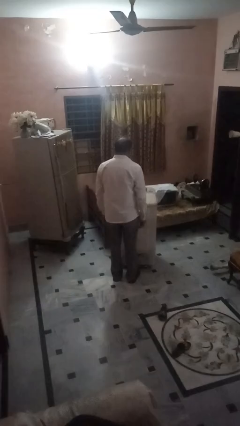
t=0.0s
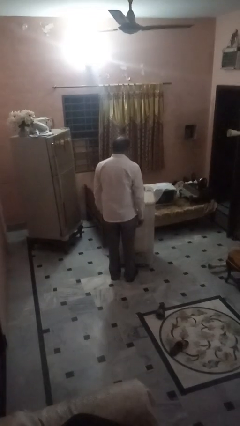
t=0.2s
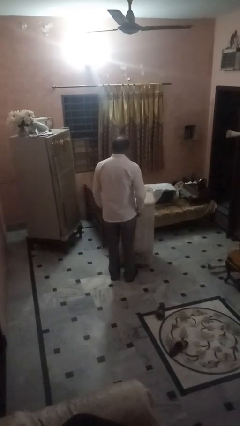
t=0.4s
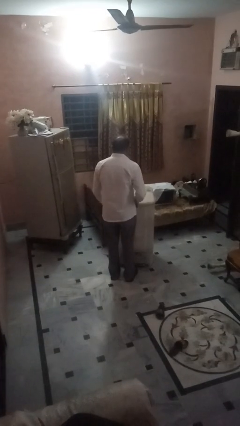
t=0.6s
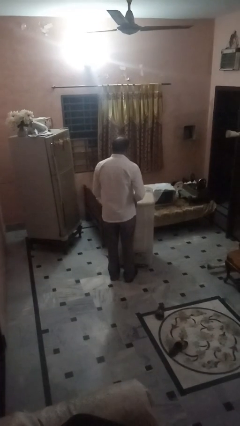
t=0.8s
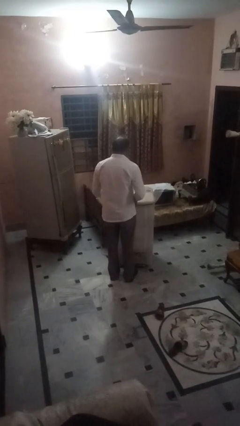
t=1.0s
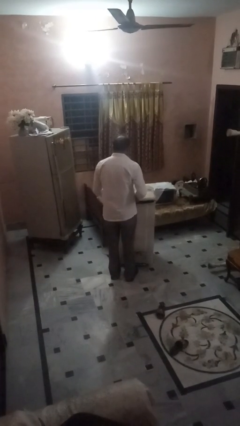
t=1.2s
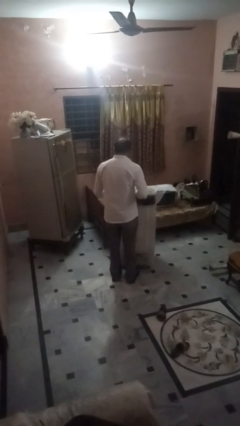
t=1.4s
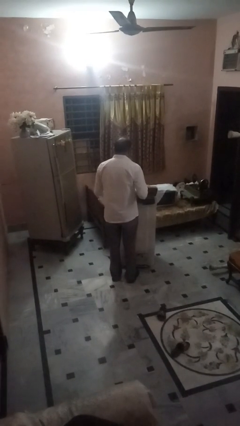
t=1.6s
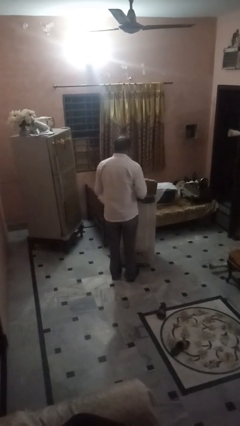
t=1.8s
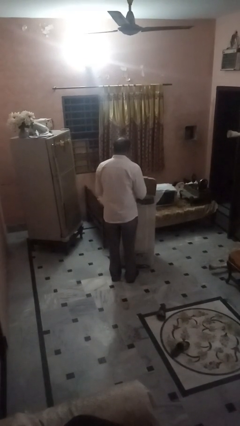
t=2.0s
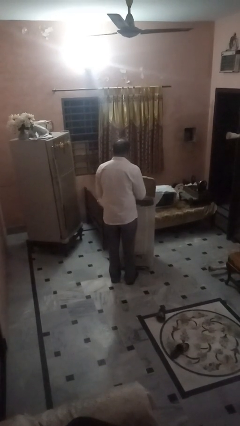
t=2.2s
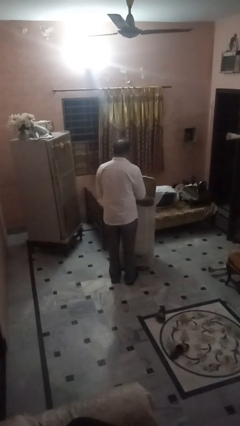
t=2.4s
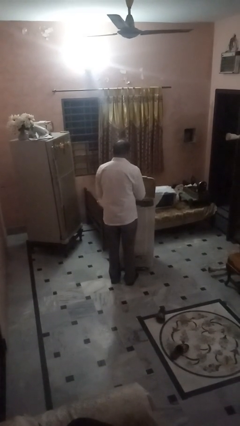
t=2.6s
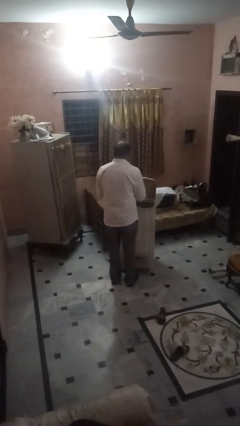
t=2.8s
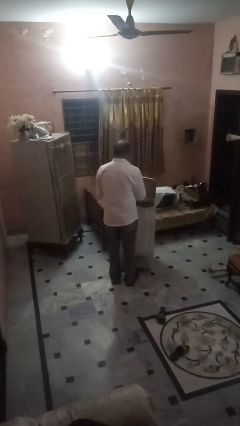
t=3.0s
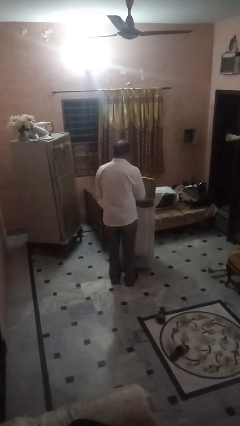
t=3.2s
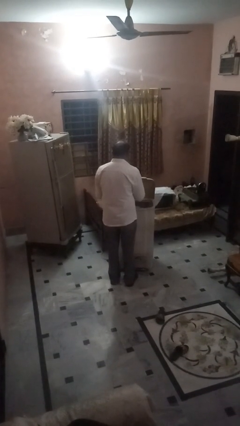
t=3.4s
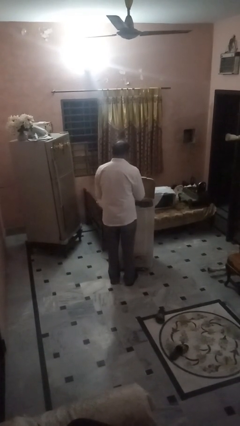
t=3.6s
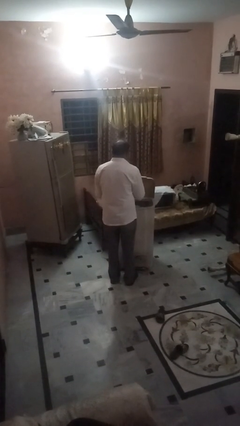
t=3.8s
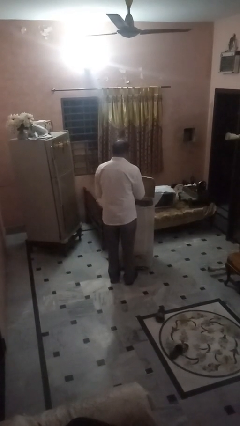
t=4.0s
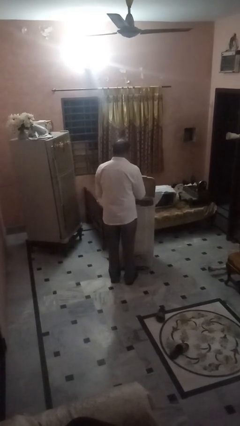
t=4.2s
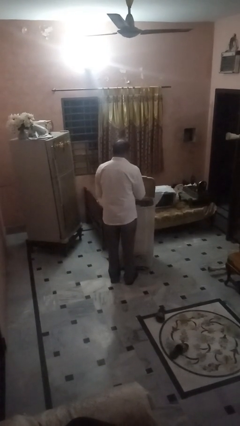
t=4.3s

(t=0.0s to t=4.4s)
person opens clothes washer

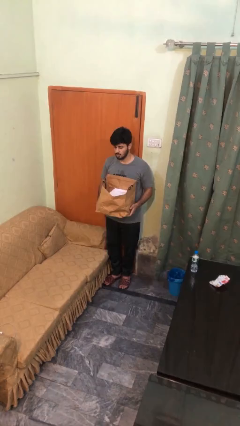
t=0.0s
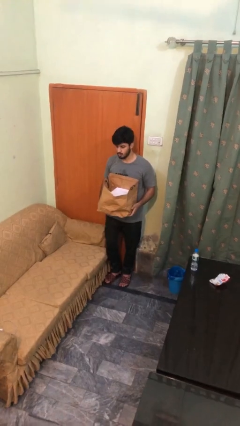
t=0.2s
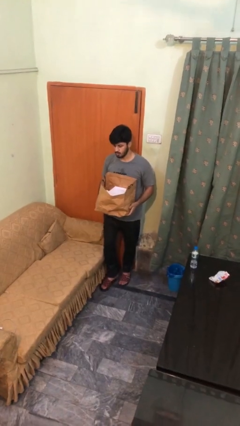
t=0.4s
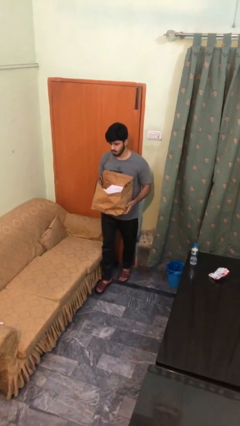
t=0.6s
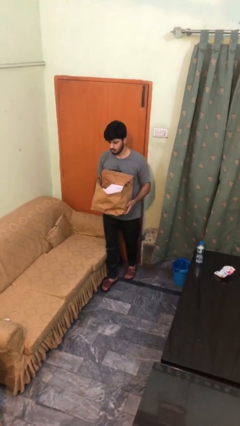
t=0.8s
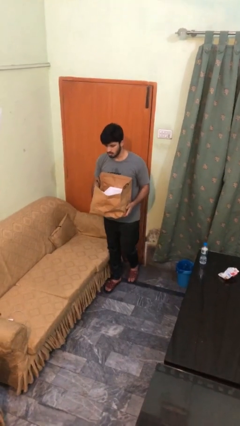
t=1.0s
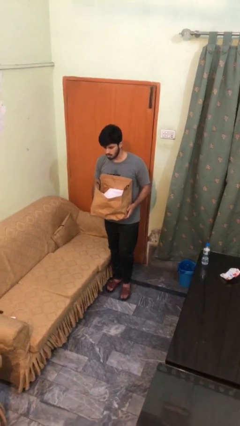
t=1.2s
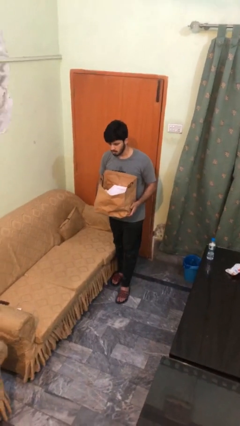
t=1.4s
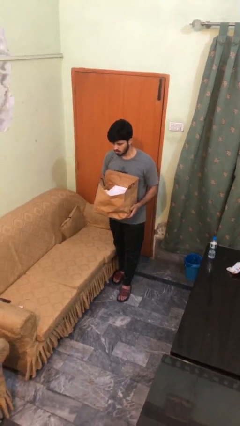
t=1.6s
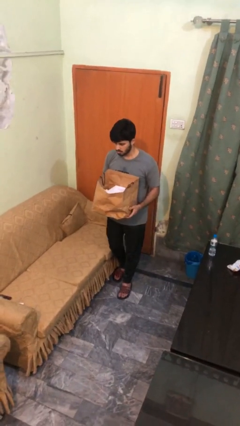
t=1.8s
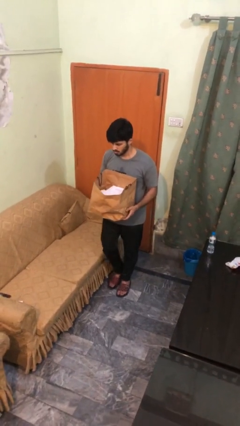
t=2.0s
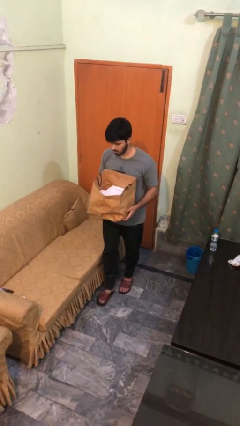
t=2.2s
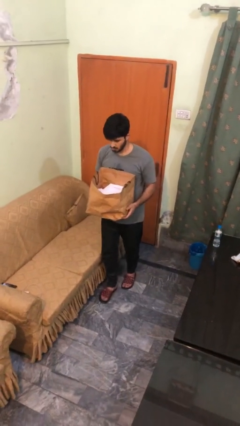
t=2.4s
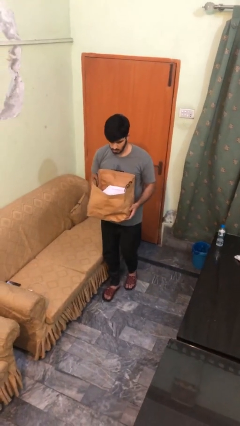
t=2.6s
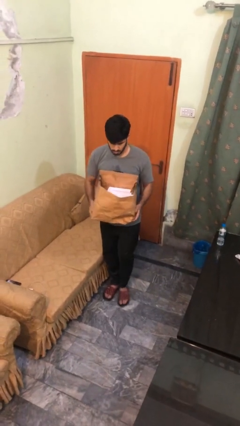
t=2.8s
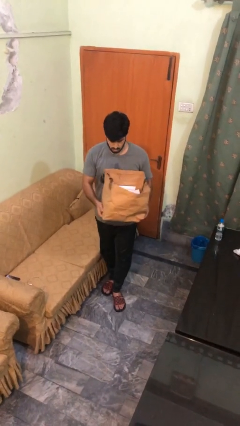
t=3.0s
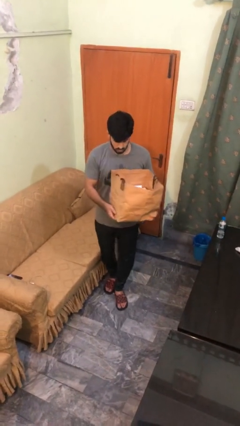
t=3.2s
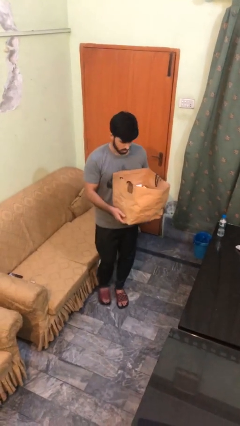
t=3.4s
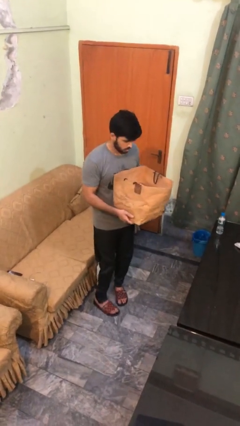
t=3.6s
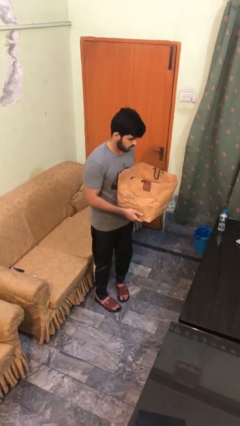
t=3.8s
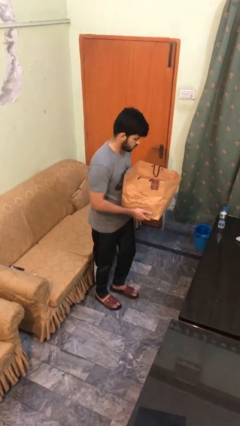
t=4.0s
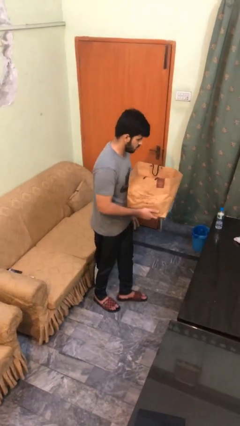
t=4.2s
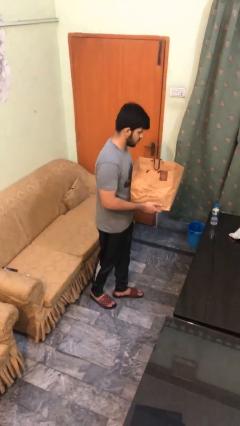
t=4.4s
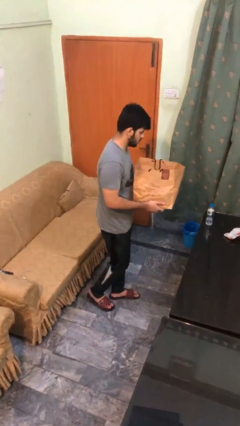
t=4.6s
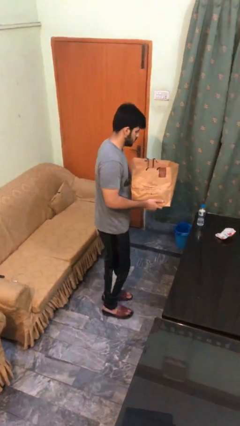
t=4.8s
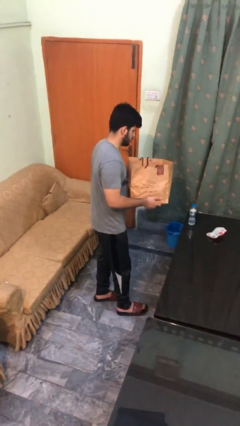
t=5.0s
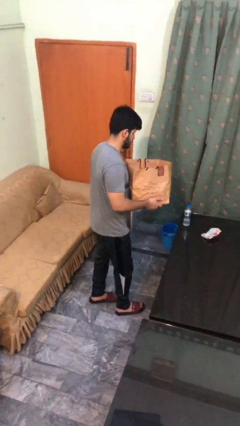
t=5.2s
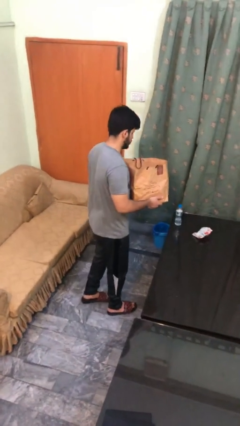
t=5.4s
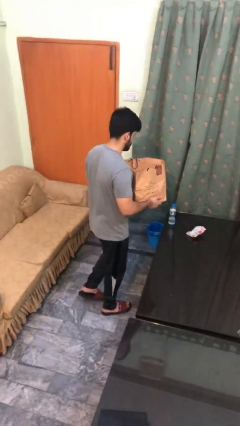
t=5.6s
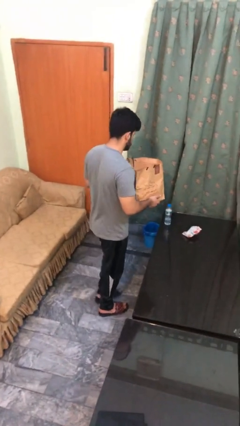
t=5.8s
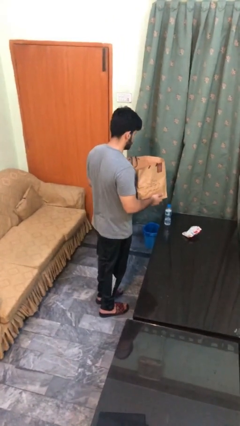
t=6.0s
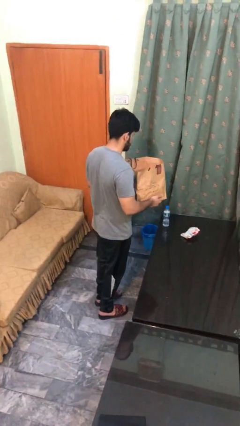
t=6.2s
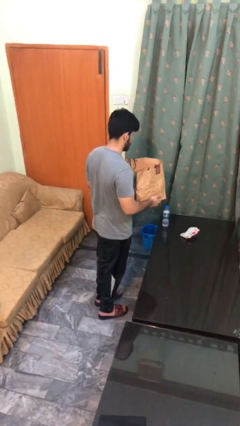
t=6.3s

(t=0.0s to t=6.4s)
person carries groceries

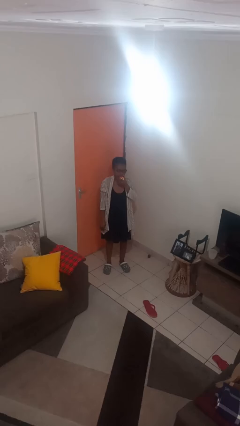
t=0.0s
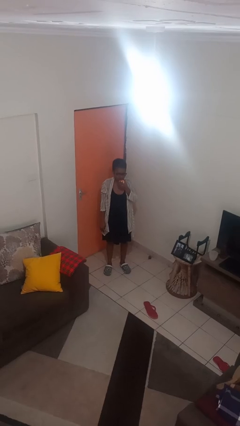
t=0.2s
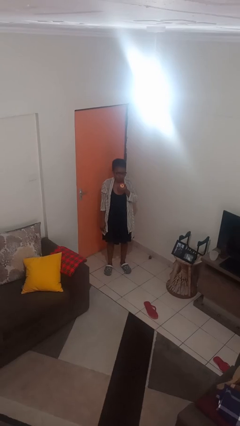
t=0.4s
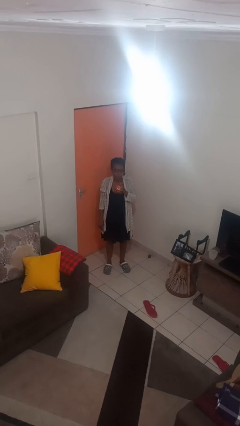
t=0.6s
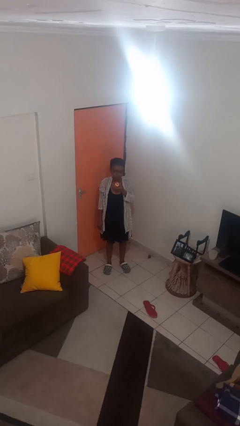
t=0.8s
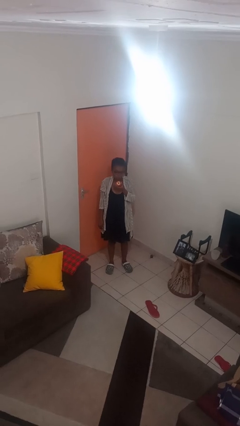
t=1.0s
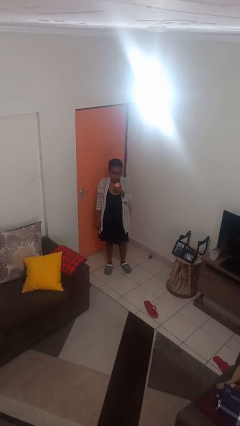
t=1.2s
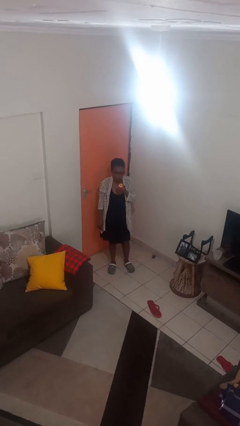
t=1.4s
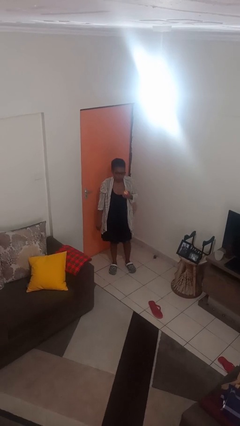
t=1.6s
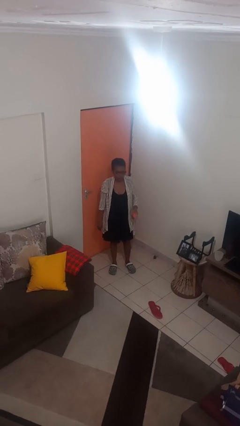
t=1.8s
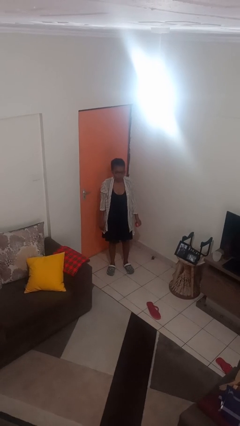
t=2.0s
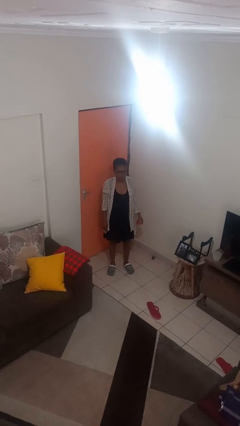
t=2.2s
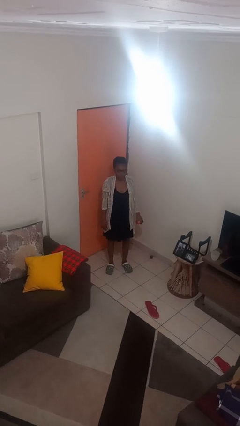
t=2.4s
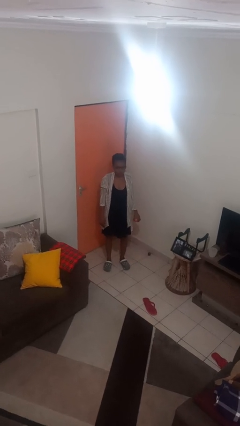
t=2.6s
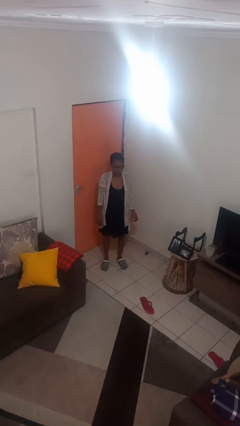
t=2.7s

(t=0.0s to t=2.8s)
person eats apple

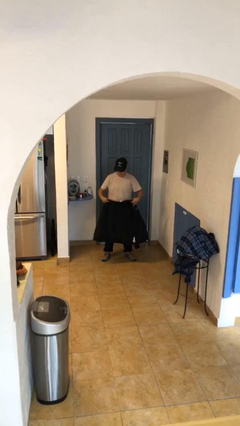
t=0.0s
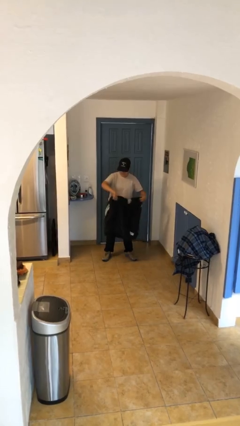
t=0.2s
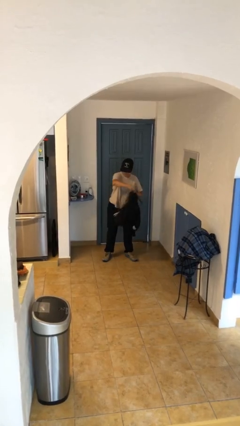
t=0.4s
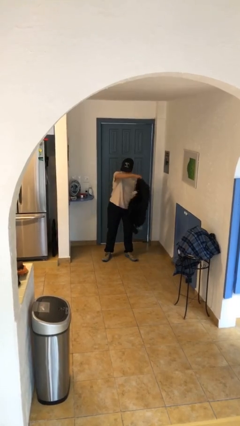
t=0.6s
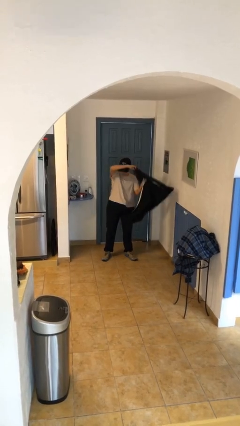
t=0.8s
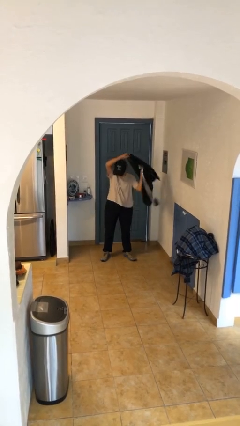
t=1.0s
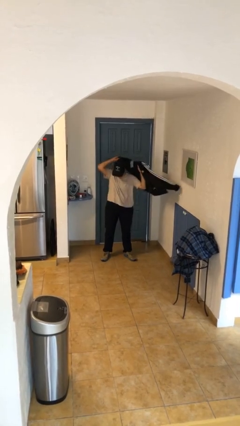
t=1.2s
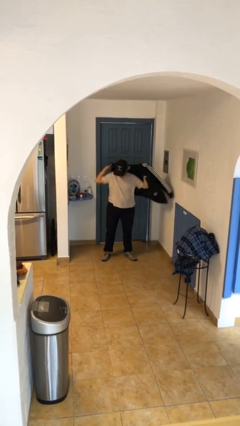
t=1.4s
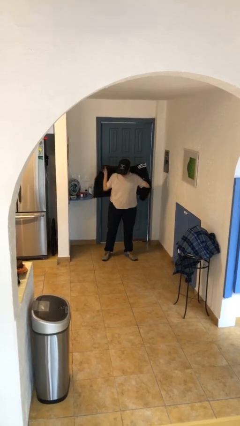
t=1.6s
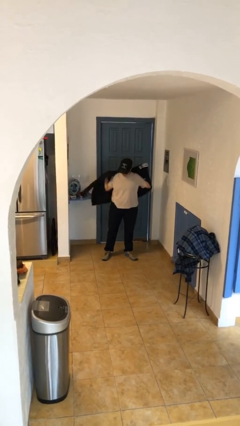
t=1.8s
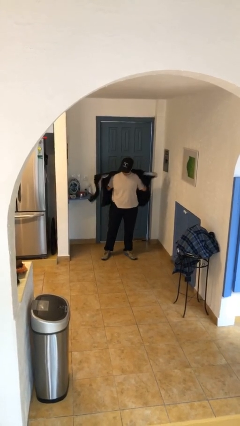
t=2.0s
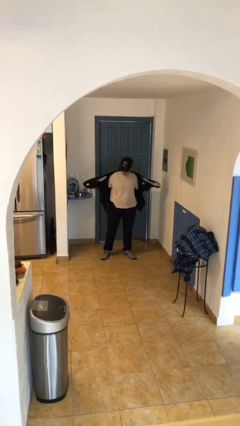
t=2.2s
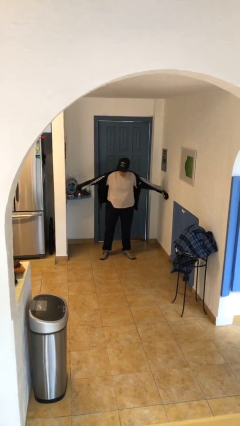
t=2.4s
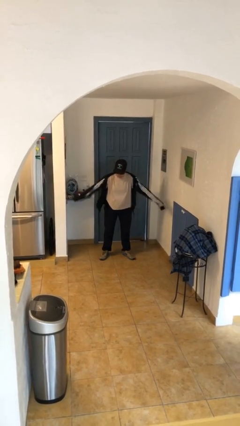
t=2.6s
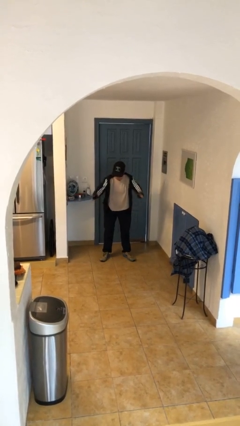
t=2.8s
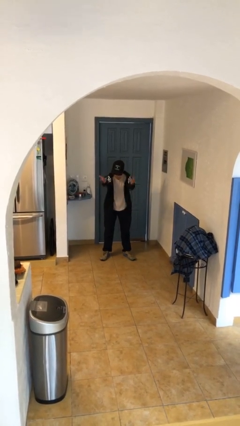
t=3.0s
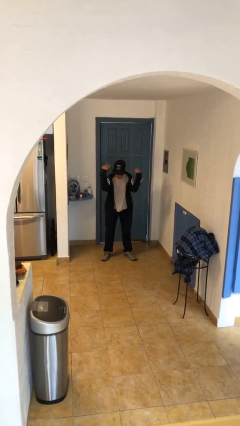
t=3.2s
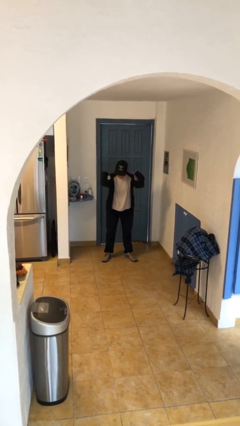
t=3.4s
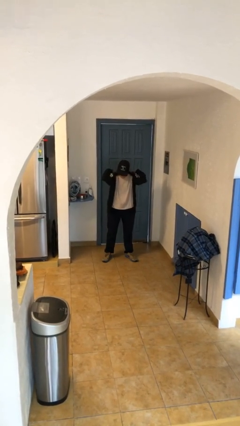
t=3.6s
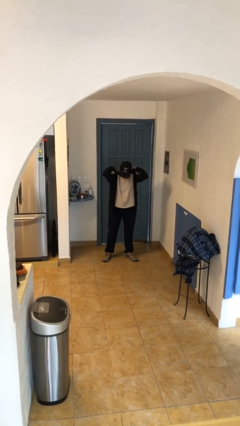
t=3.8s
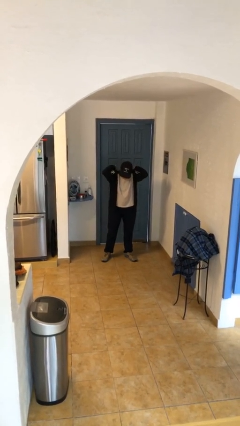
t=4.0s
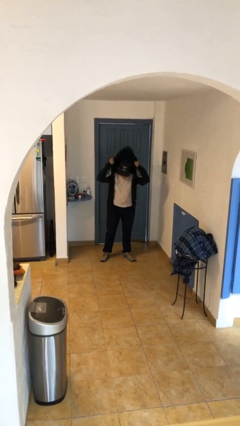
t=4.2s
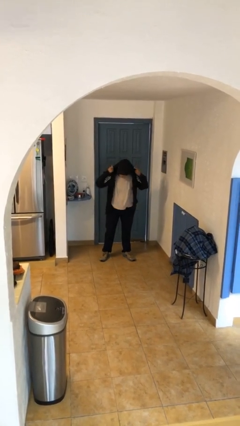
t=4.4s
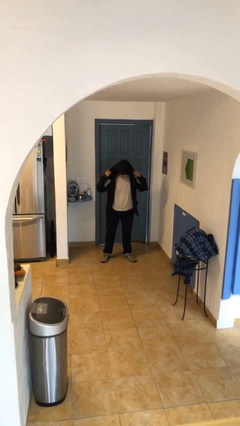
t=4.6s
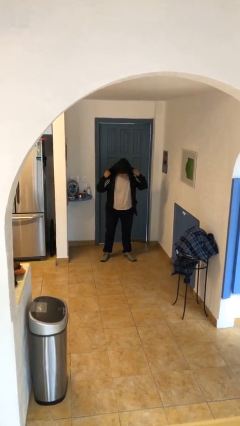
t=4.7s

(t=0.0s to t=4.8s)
person puts on hoodie
